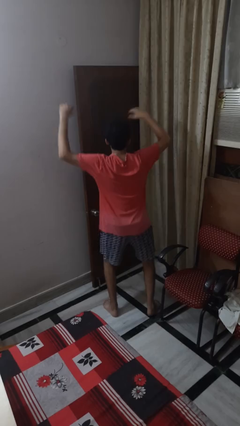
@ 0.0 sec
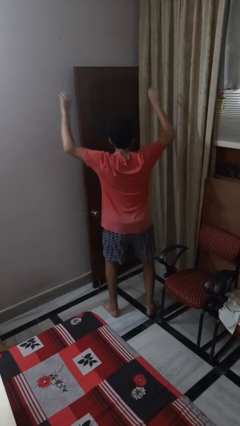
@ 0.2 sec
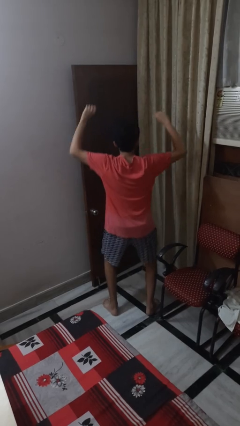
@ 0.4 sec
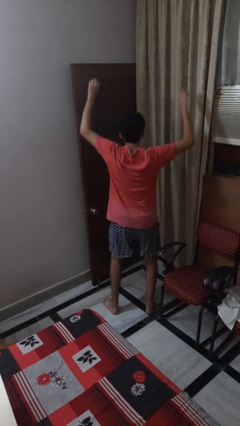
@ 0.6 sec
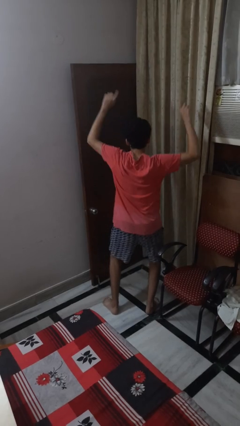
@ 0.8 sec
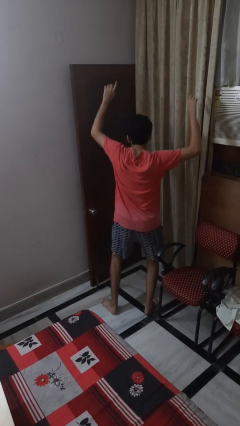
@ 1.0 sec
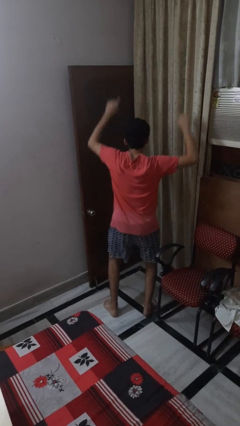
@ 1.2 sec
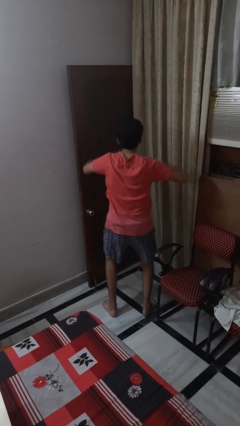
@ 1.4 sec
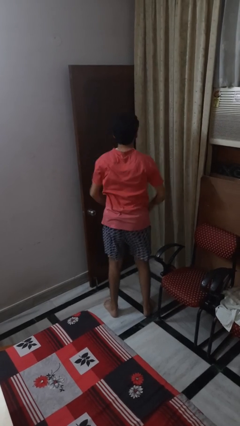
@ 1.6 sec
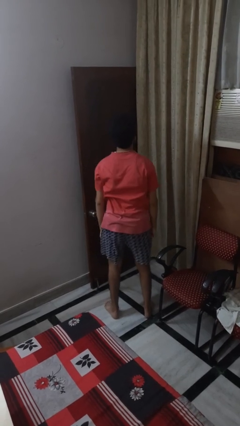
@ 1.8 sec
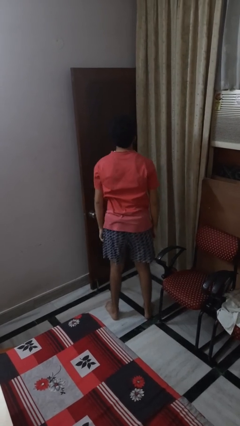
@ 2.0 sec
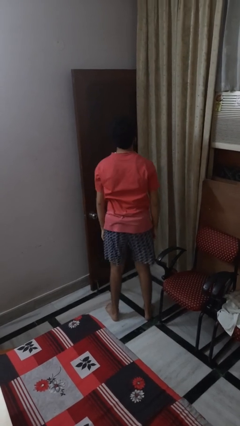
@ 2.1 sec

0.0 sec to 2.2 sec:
person dances in place

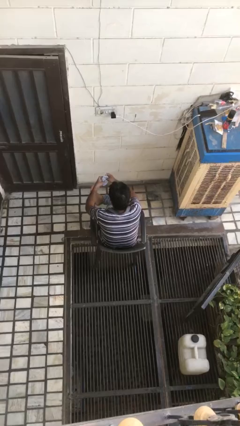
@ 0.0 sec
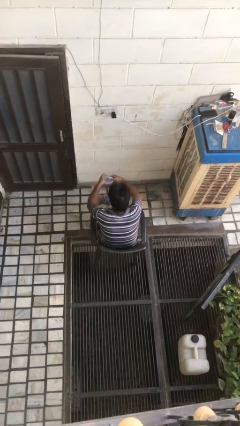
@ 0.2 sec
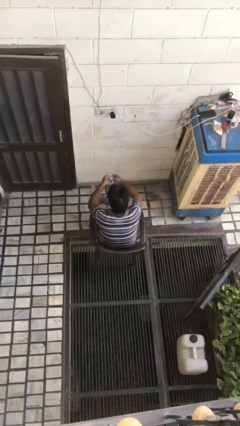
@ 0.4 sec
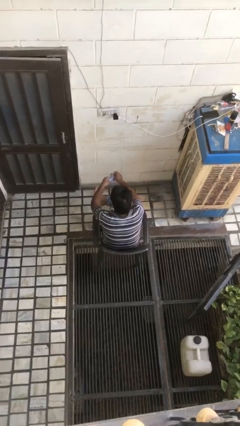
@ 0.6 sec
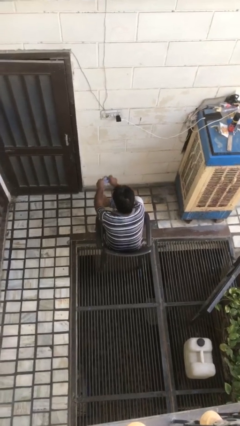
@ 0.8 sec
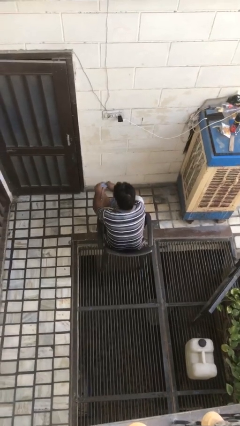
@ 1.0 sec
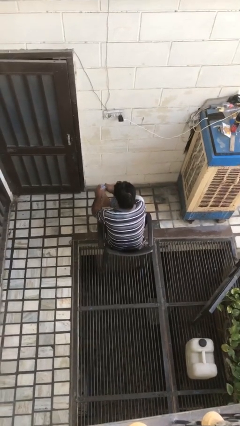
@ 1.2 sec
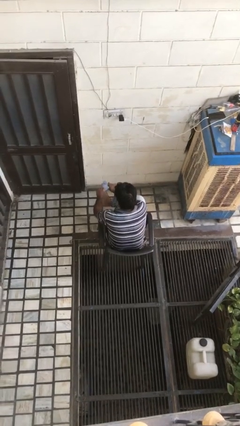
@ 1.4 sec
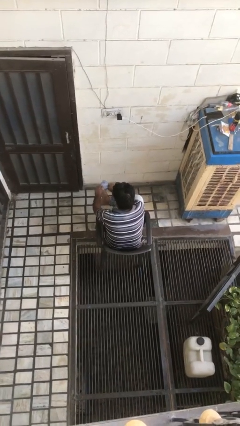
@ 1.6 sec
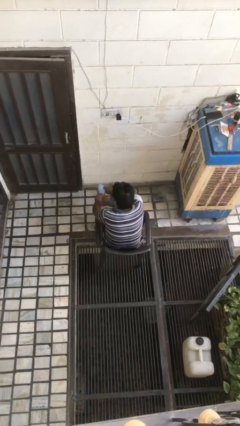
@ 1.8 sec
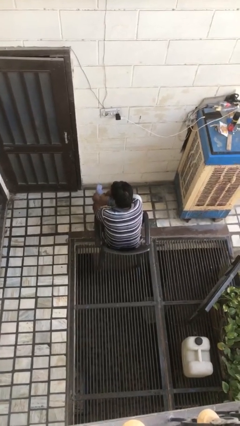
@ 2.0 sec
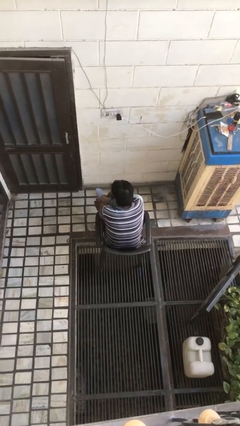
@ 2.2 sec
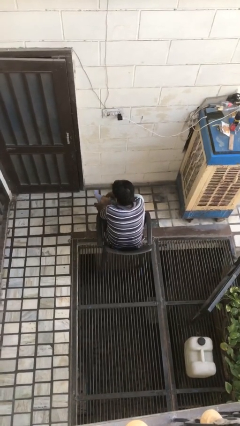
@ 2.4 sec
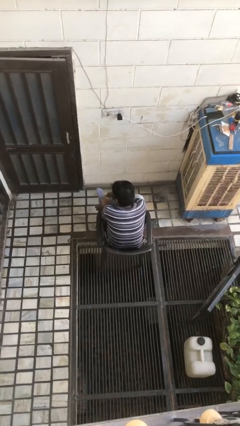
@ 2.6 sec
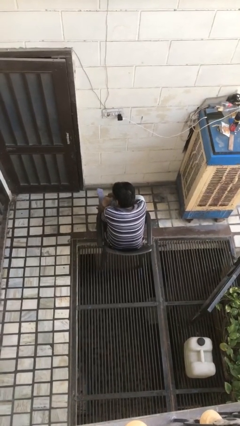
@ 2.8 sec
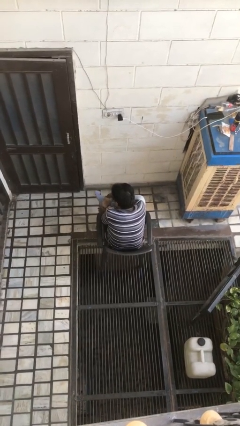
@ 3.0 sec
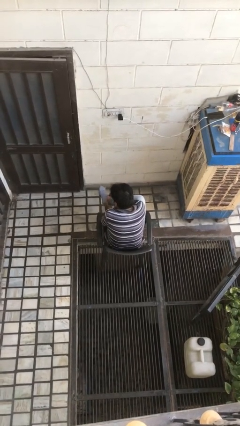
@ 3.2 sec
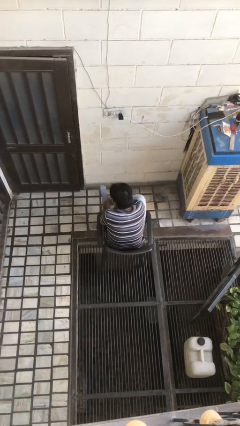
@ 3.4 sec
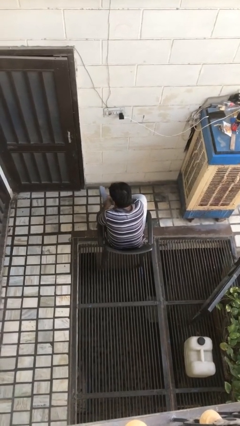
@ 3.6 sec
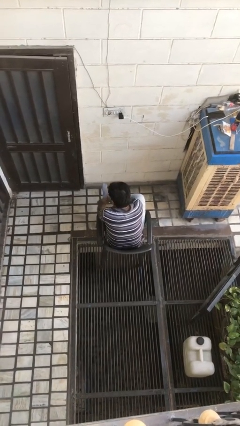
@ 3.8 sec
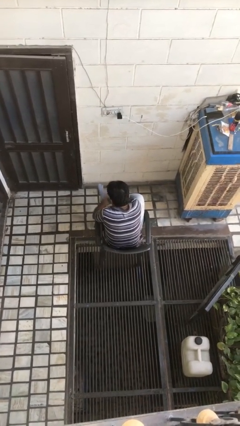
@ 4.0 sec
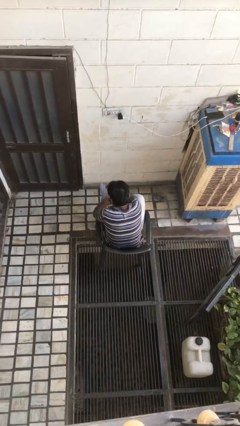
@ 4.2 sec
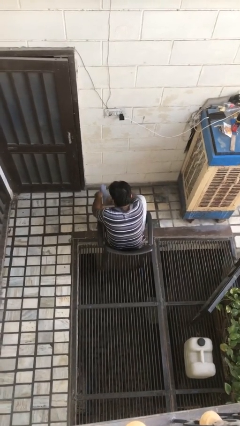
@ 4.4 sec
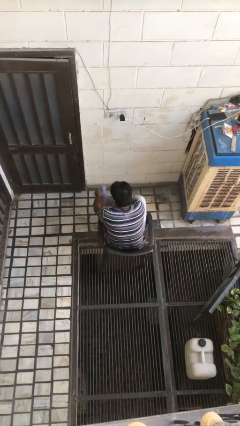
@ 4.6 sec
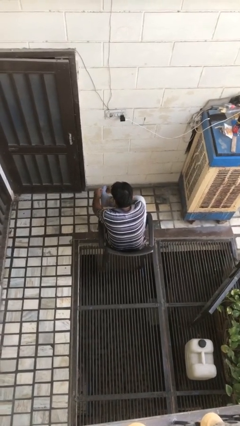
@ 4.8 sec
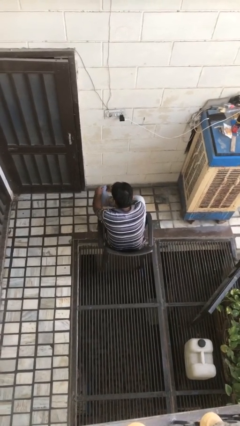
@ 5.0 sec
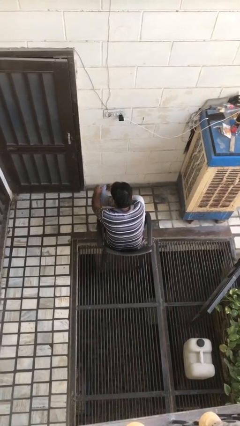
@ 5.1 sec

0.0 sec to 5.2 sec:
person puts on socks

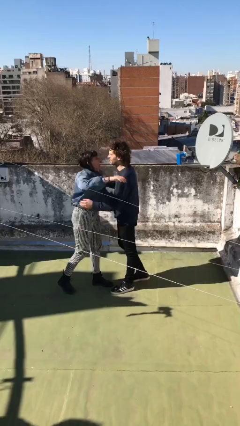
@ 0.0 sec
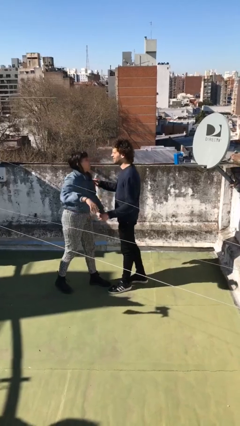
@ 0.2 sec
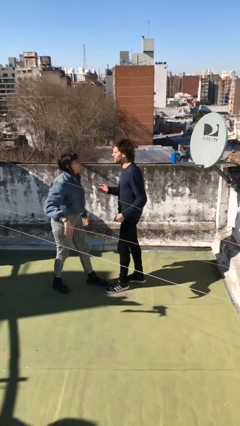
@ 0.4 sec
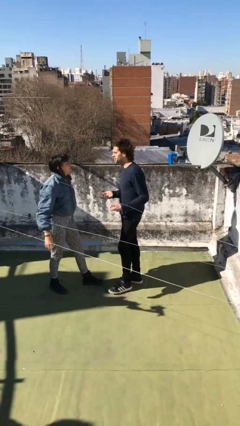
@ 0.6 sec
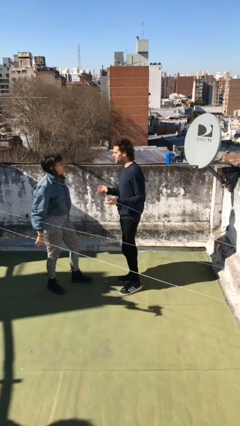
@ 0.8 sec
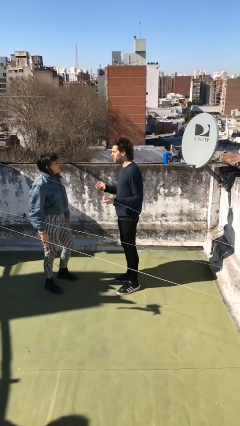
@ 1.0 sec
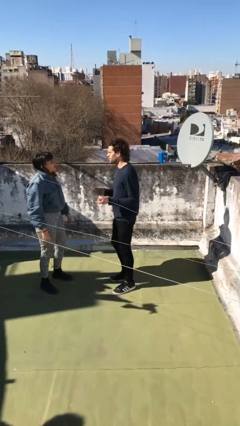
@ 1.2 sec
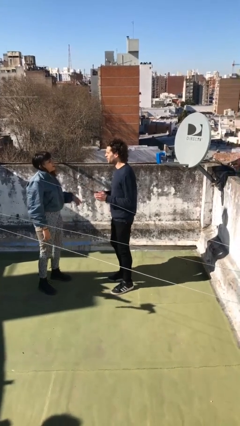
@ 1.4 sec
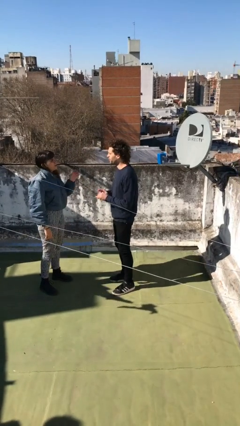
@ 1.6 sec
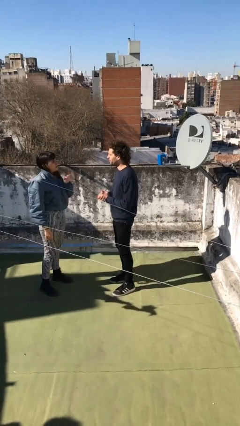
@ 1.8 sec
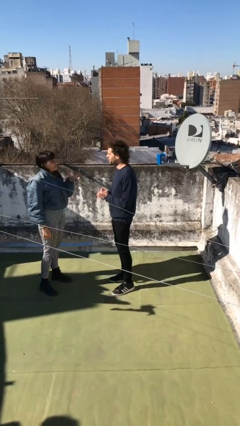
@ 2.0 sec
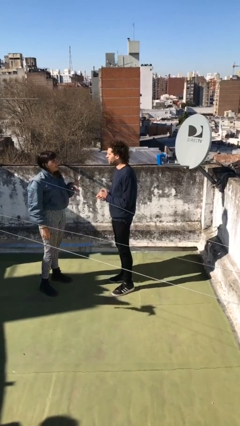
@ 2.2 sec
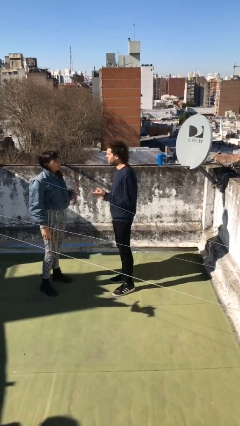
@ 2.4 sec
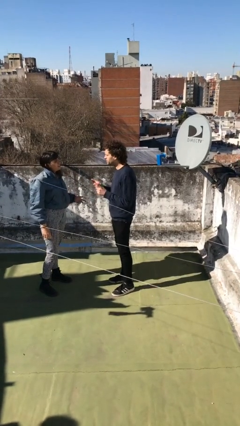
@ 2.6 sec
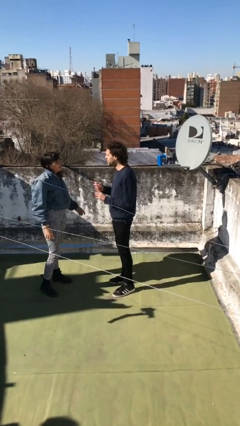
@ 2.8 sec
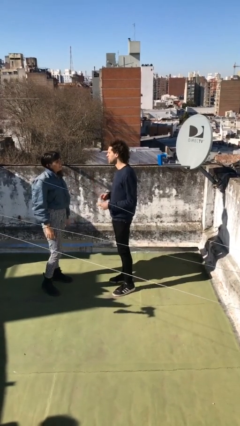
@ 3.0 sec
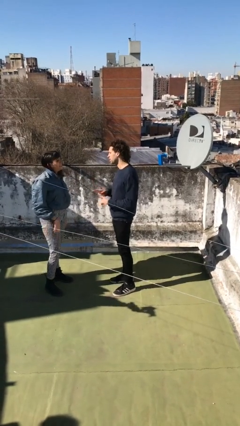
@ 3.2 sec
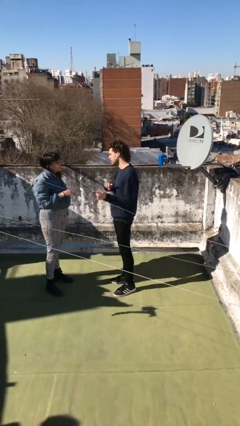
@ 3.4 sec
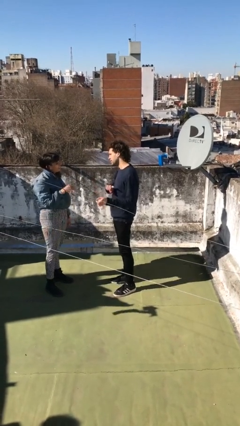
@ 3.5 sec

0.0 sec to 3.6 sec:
person talks to person

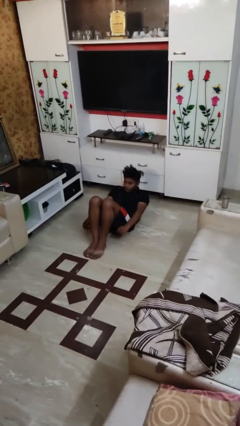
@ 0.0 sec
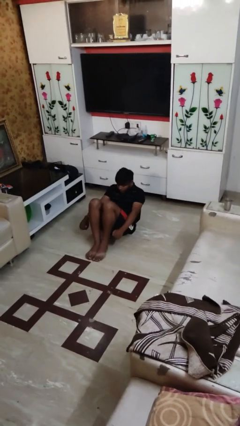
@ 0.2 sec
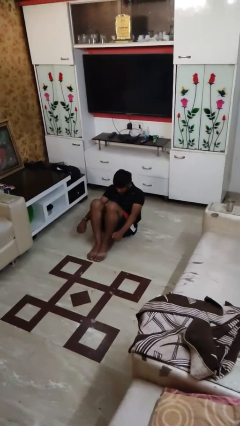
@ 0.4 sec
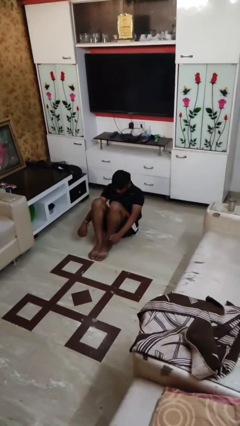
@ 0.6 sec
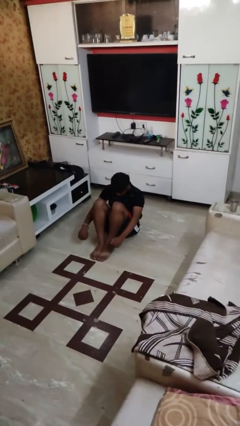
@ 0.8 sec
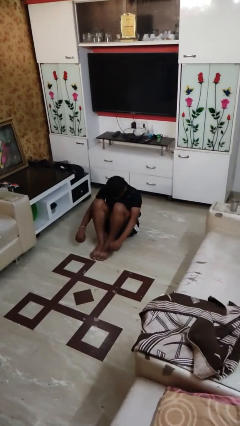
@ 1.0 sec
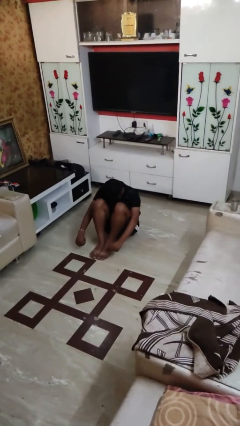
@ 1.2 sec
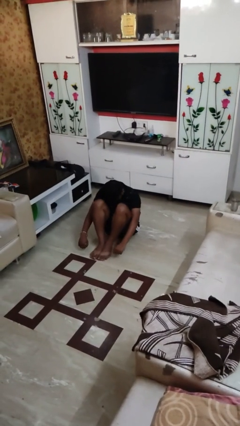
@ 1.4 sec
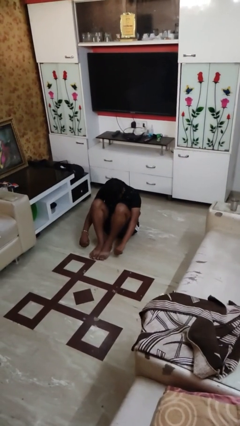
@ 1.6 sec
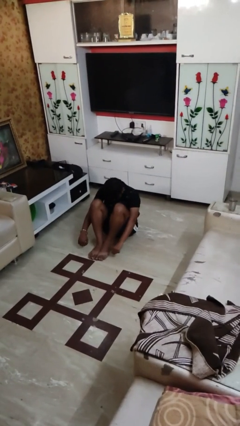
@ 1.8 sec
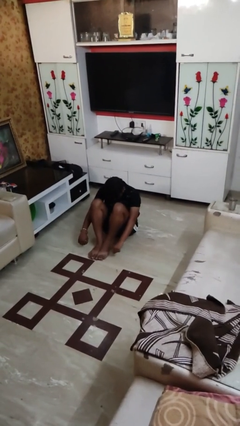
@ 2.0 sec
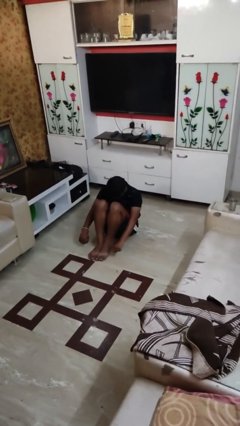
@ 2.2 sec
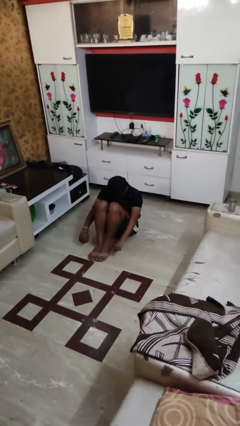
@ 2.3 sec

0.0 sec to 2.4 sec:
person exercises with situp

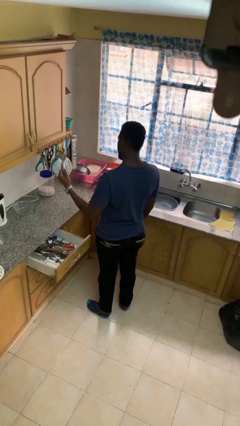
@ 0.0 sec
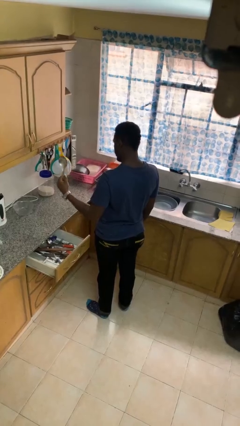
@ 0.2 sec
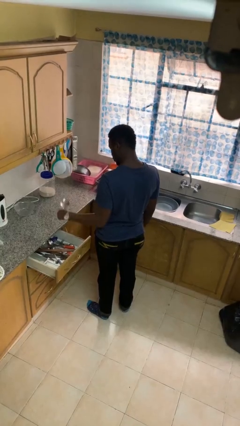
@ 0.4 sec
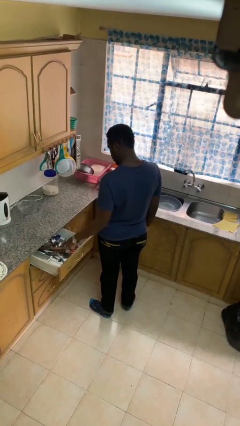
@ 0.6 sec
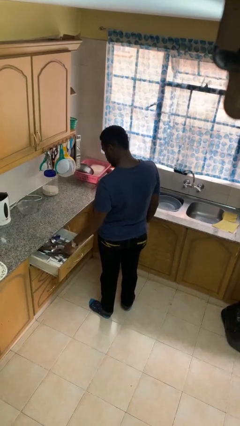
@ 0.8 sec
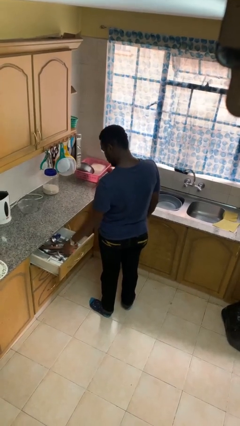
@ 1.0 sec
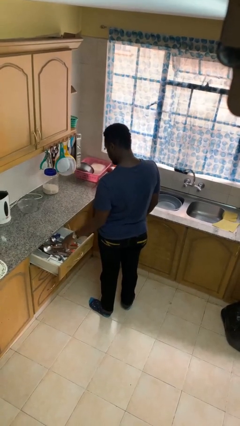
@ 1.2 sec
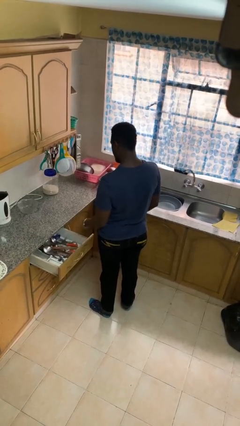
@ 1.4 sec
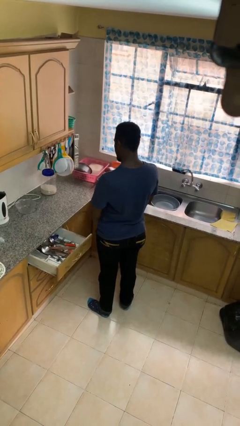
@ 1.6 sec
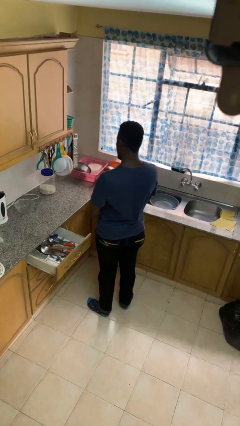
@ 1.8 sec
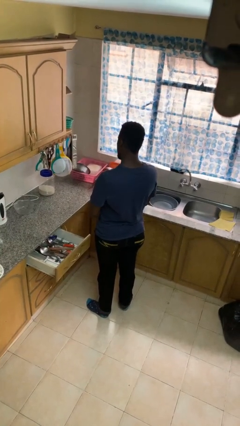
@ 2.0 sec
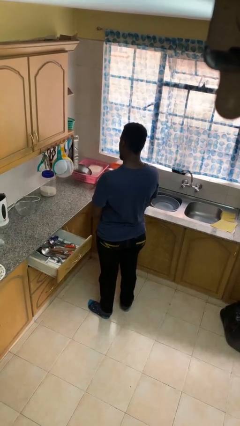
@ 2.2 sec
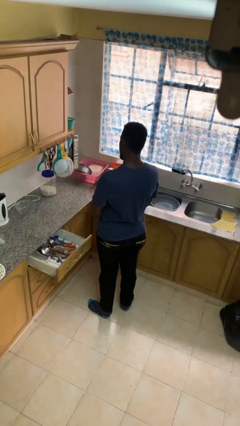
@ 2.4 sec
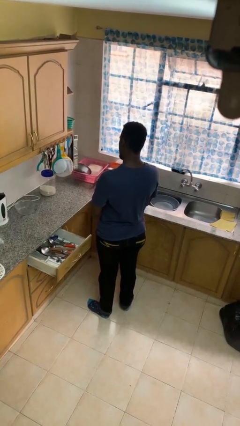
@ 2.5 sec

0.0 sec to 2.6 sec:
person puts object into kitchen drawer

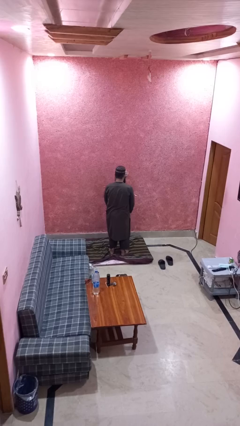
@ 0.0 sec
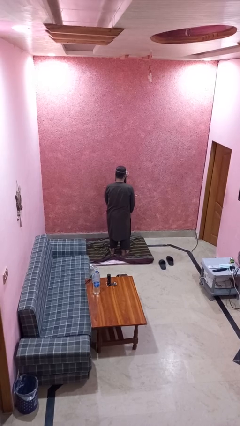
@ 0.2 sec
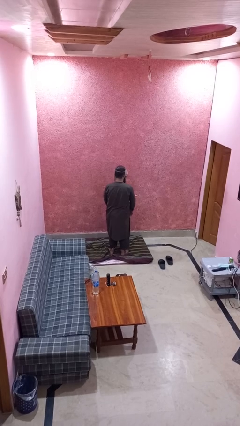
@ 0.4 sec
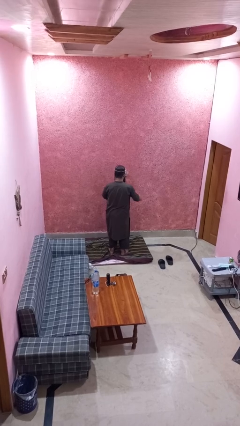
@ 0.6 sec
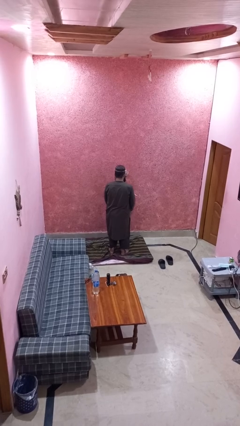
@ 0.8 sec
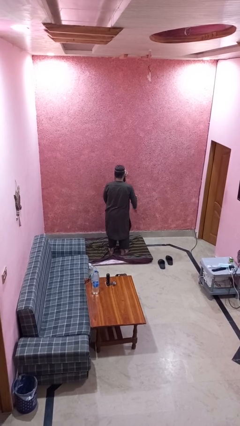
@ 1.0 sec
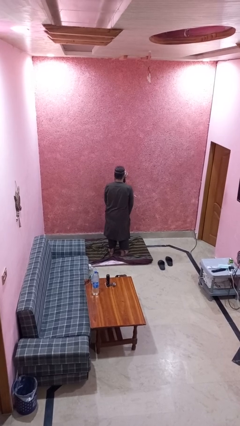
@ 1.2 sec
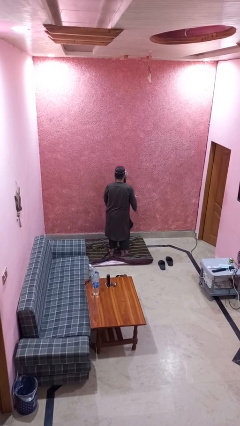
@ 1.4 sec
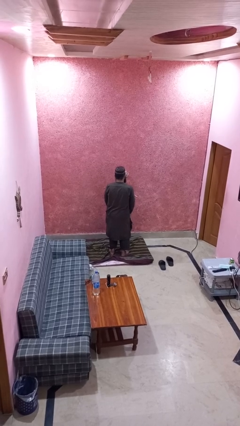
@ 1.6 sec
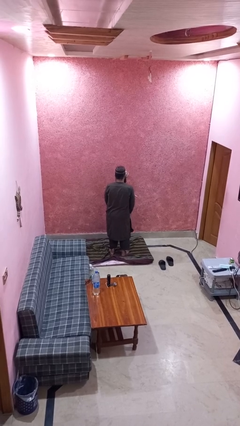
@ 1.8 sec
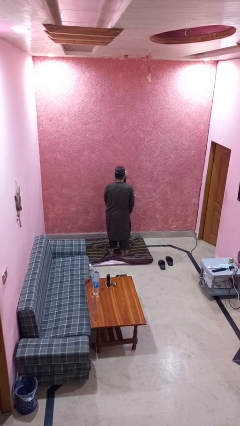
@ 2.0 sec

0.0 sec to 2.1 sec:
person slaps hands on thighs
